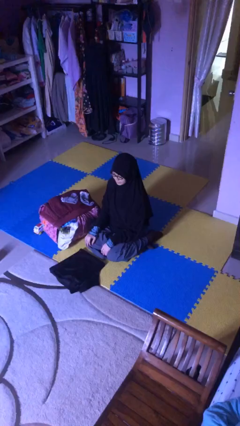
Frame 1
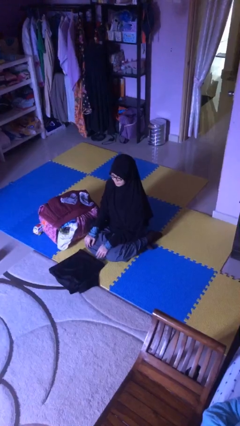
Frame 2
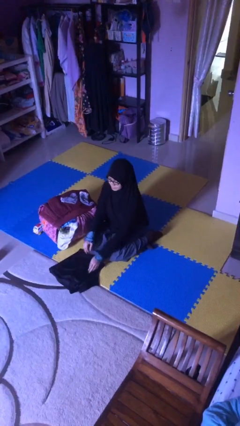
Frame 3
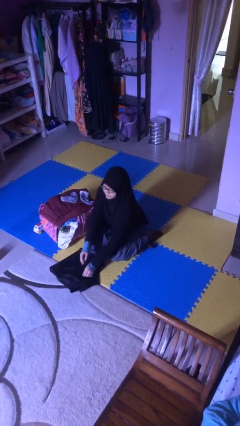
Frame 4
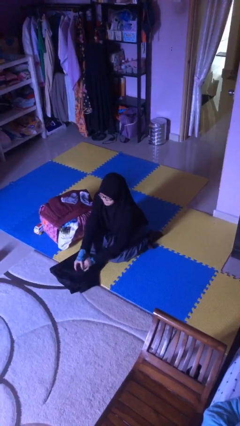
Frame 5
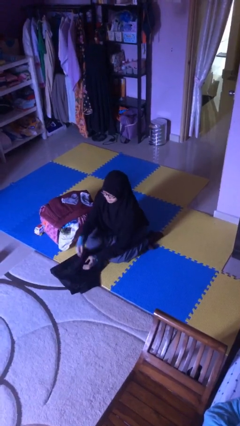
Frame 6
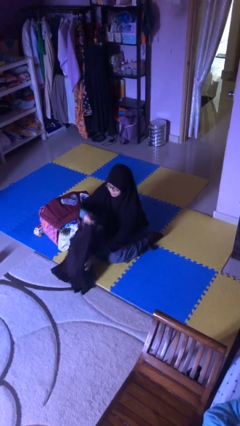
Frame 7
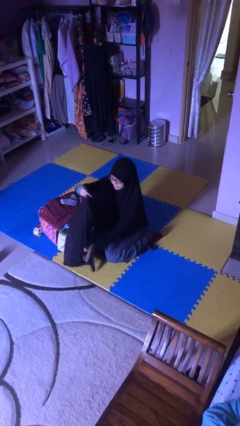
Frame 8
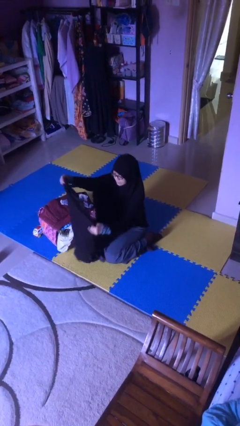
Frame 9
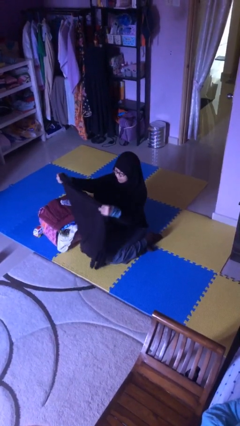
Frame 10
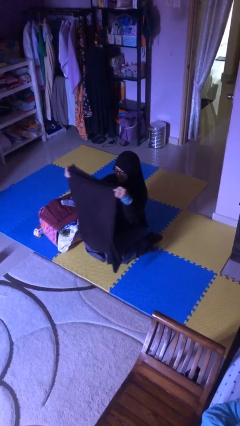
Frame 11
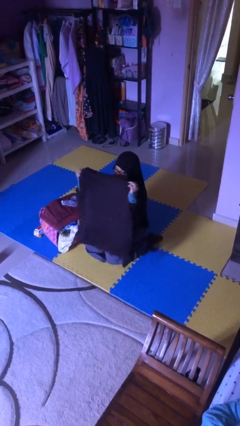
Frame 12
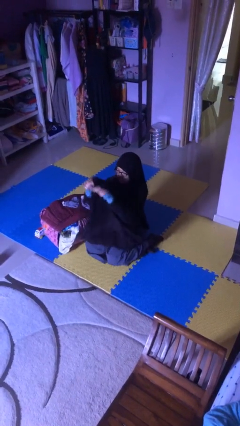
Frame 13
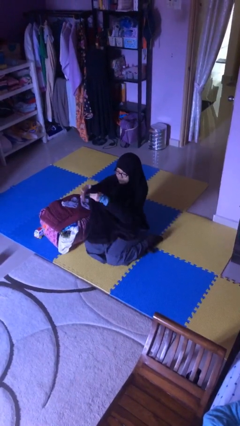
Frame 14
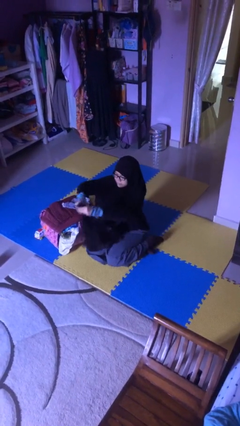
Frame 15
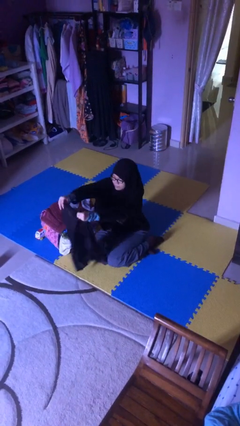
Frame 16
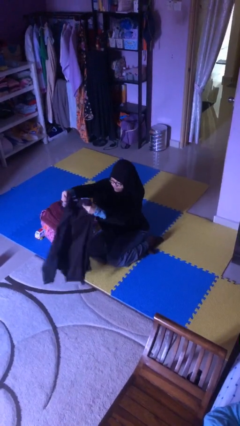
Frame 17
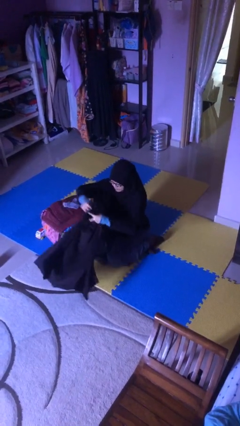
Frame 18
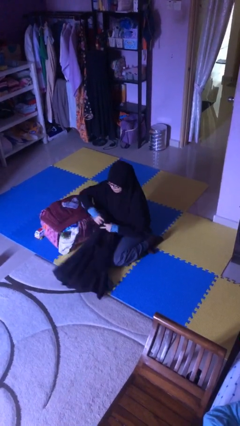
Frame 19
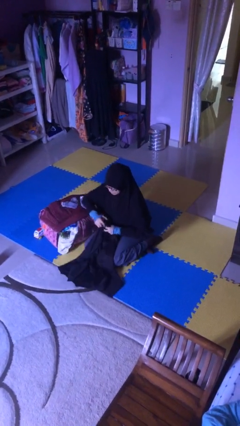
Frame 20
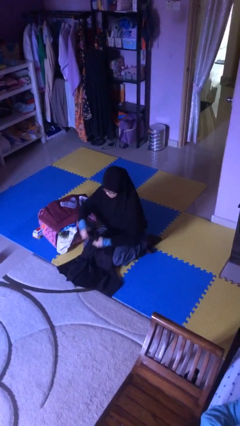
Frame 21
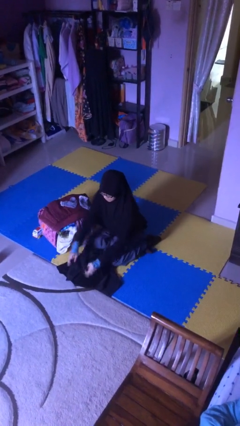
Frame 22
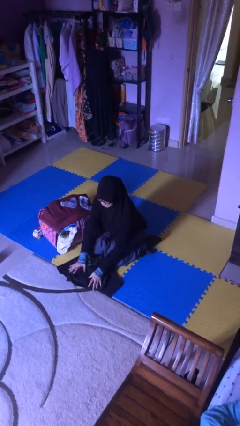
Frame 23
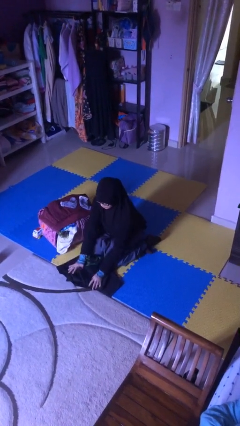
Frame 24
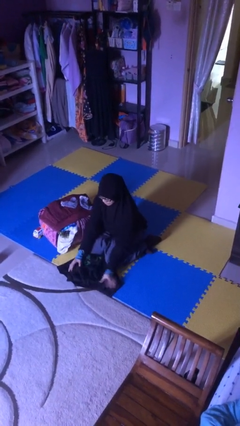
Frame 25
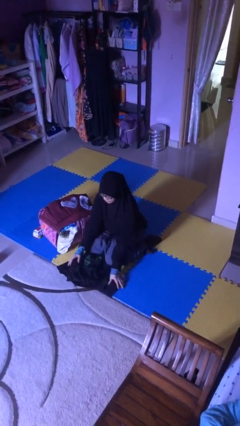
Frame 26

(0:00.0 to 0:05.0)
person folds shirt

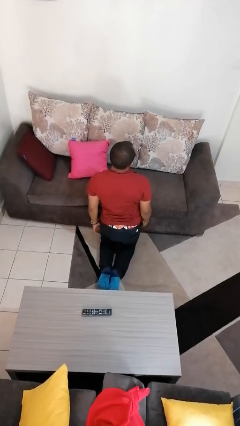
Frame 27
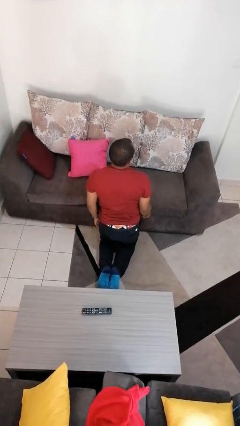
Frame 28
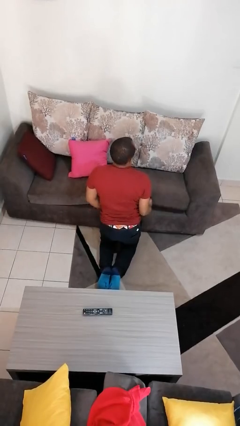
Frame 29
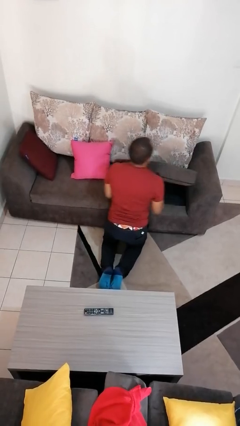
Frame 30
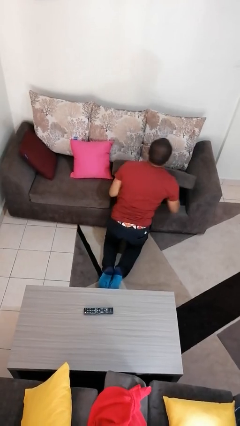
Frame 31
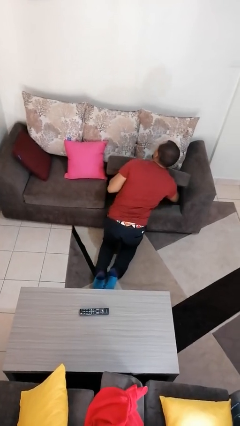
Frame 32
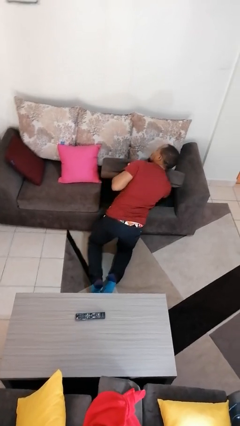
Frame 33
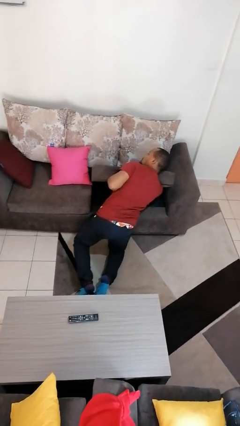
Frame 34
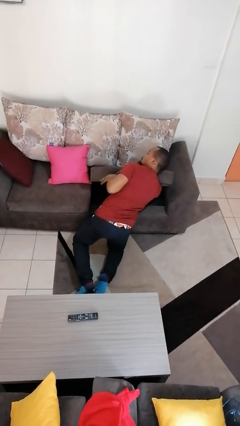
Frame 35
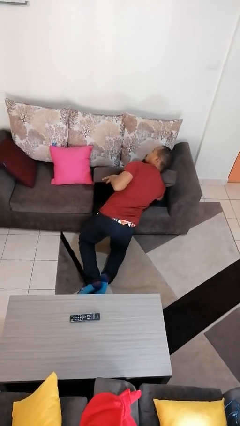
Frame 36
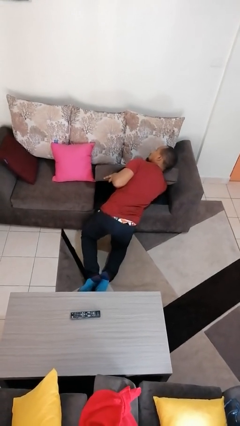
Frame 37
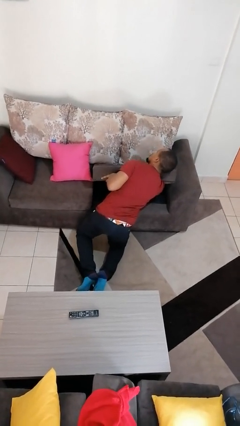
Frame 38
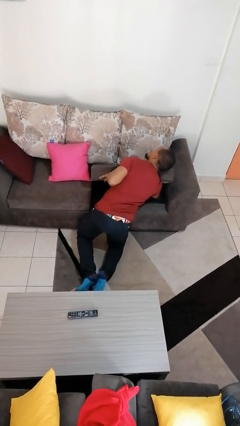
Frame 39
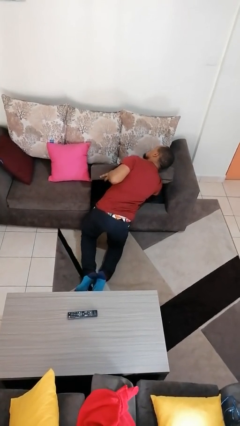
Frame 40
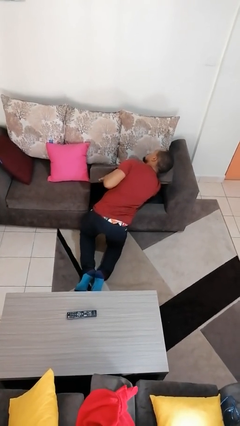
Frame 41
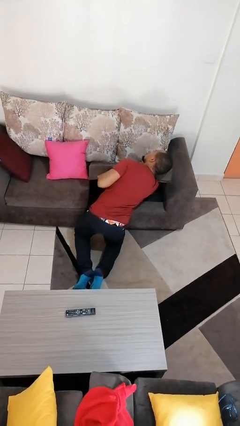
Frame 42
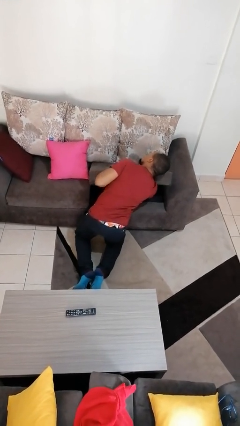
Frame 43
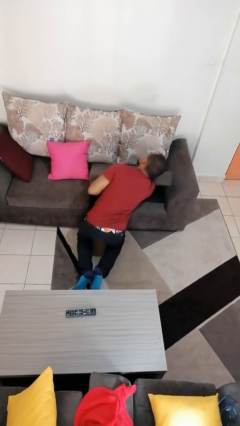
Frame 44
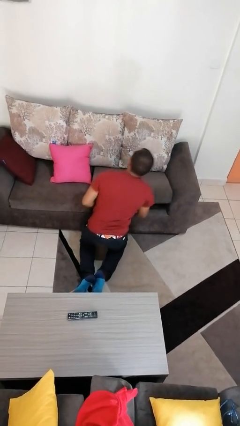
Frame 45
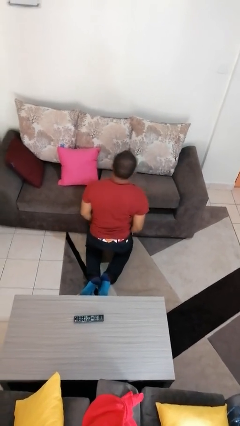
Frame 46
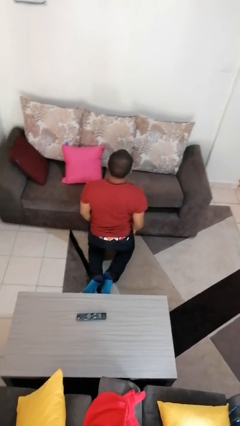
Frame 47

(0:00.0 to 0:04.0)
person searches under couch

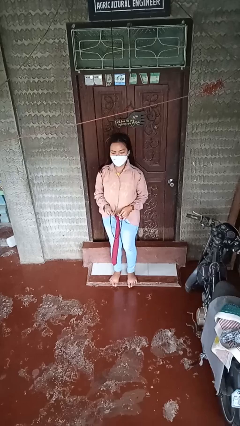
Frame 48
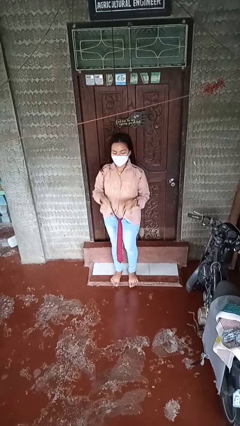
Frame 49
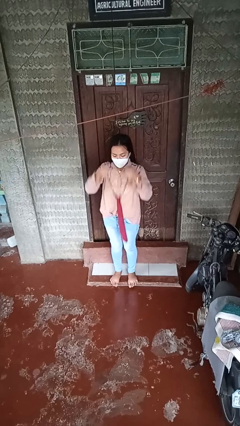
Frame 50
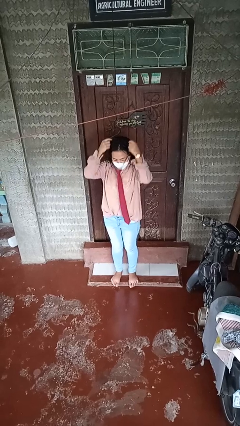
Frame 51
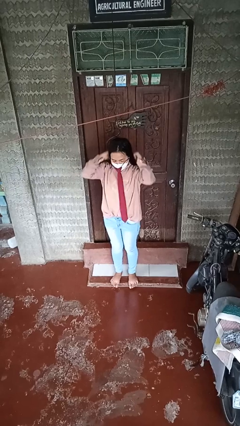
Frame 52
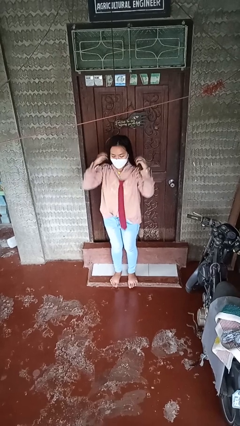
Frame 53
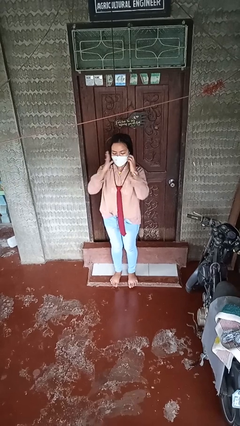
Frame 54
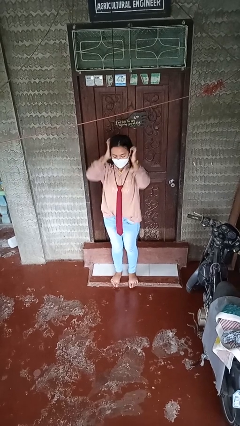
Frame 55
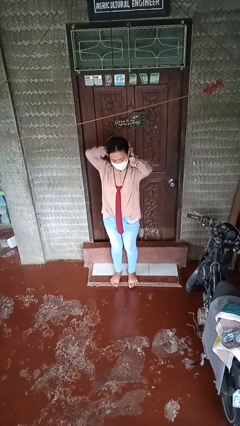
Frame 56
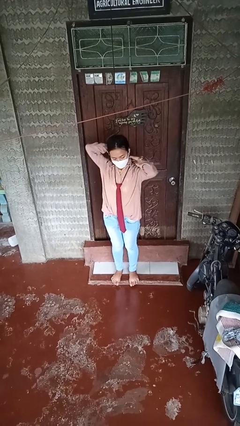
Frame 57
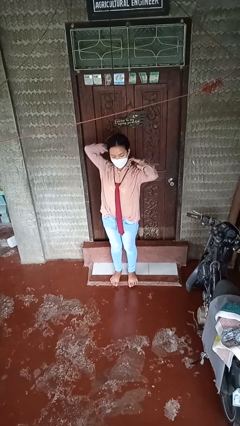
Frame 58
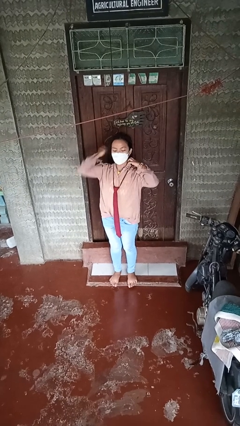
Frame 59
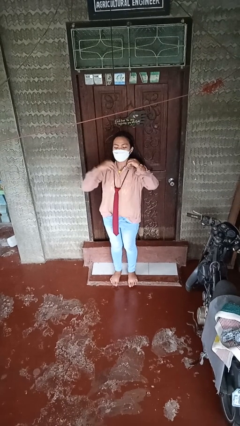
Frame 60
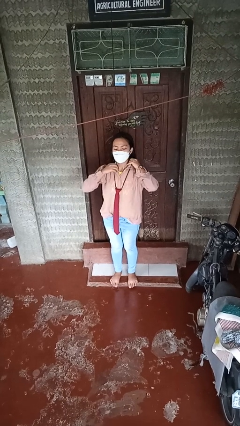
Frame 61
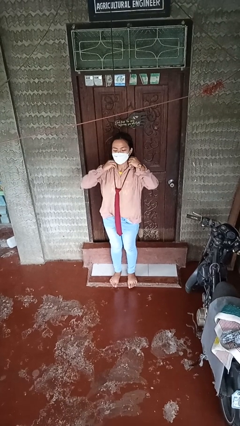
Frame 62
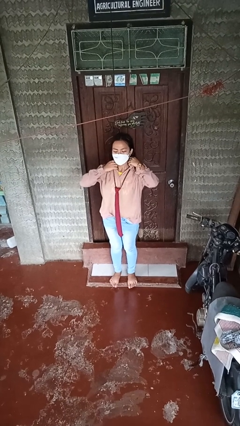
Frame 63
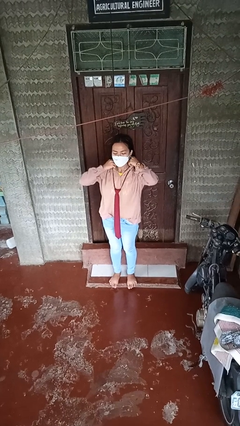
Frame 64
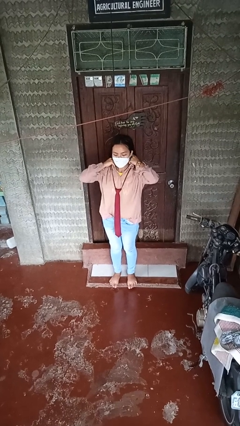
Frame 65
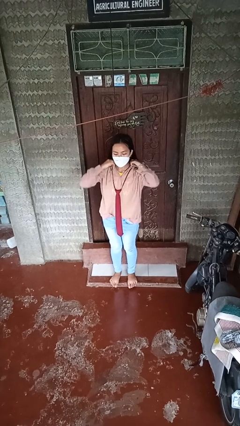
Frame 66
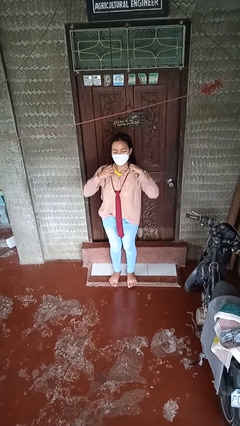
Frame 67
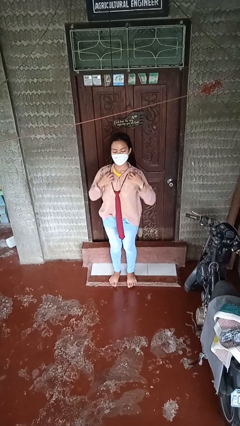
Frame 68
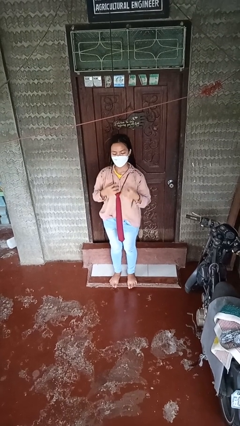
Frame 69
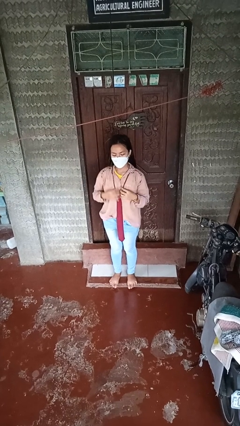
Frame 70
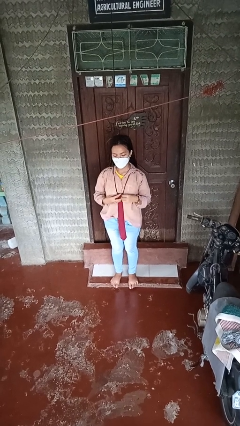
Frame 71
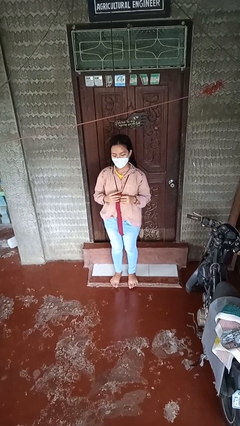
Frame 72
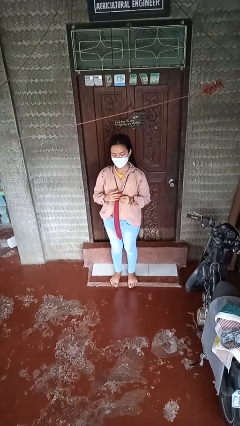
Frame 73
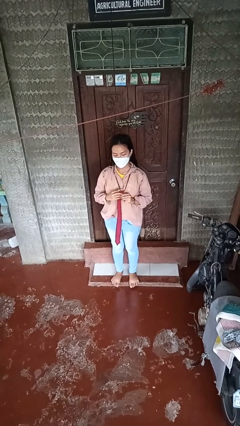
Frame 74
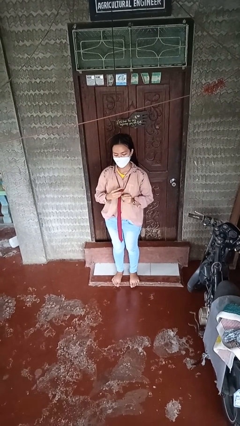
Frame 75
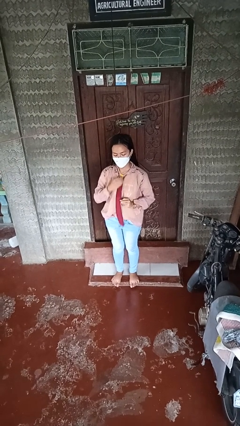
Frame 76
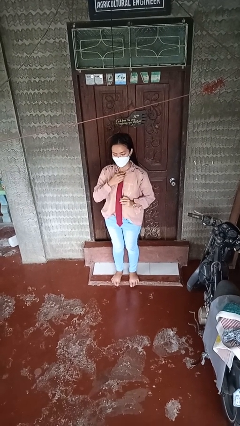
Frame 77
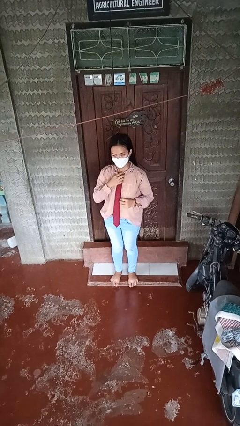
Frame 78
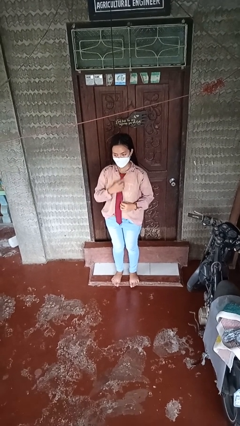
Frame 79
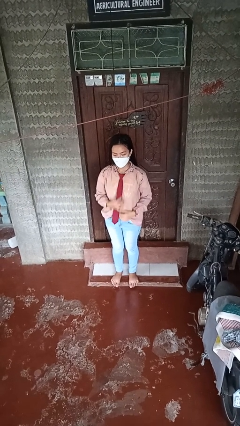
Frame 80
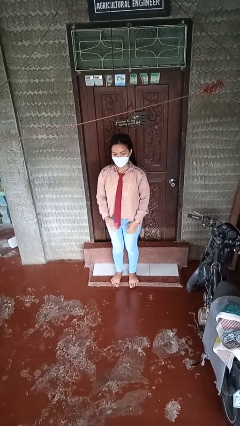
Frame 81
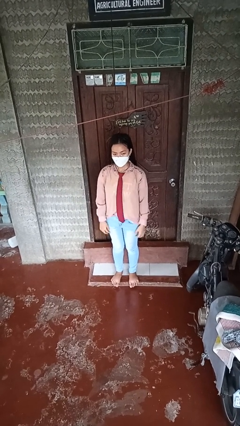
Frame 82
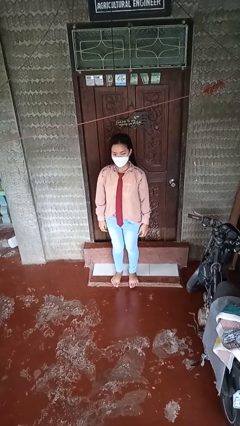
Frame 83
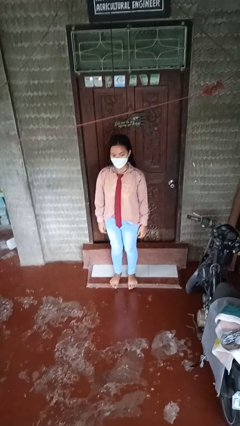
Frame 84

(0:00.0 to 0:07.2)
person puts on necktie

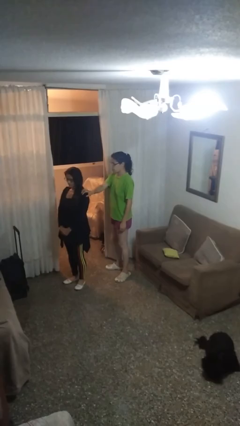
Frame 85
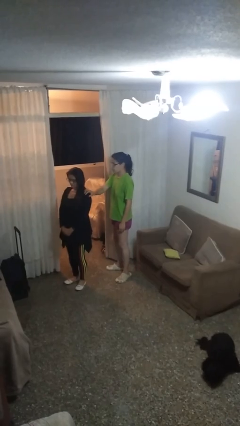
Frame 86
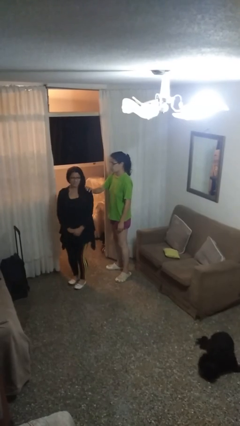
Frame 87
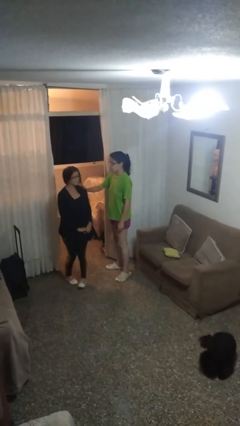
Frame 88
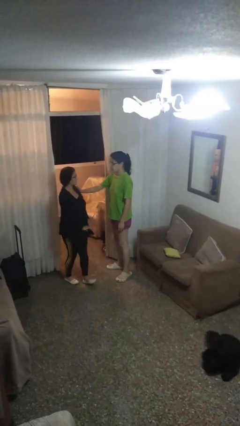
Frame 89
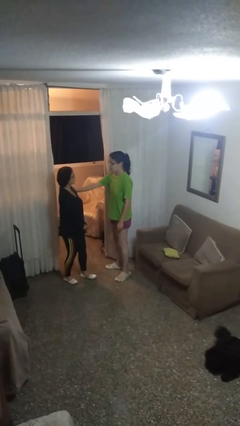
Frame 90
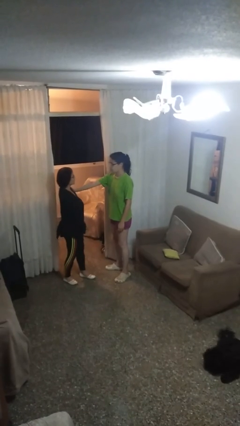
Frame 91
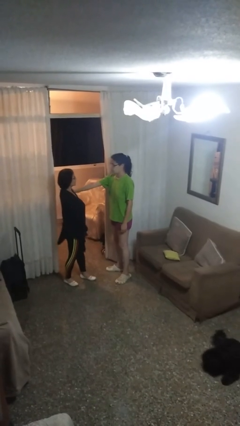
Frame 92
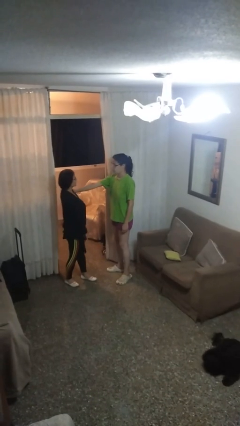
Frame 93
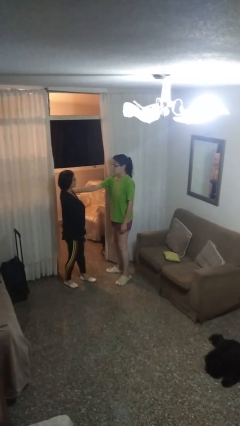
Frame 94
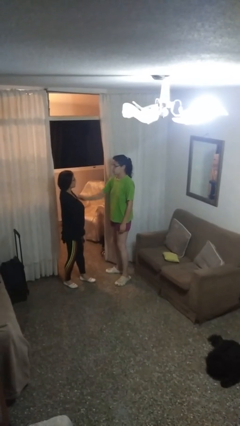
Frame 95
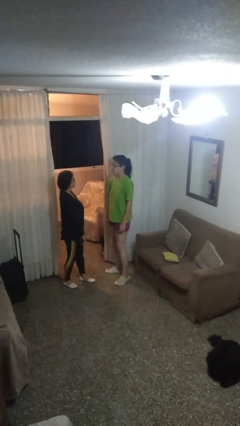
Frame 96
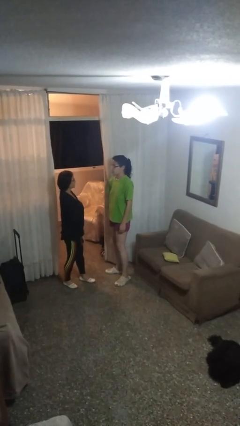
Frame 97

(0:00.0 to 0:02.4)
person spins person around
